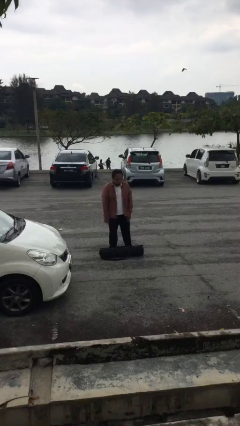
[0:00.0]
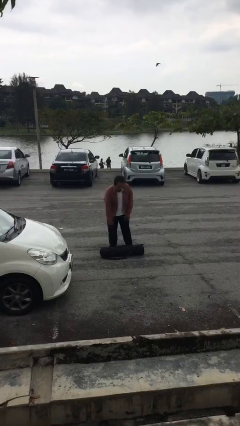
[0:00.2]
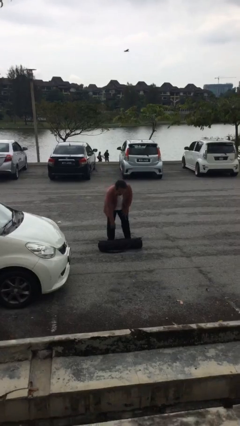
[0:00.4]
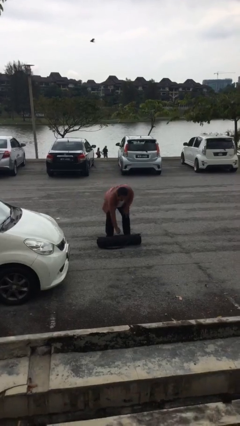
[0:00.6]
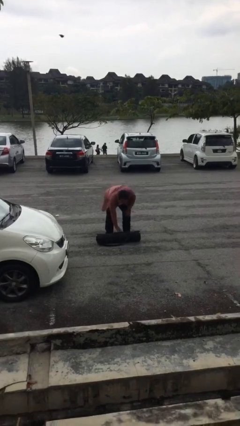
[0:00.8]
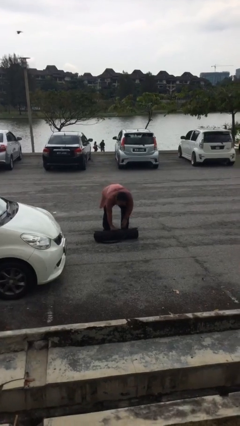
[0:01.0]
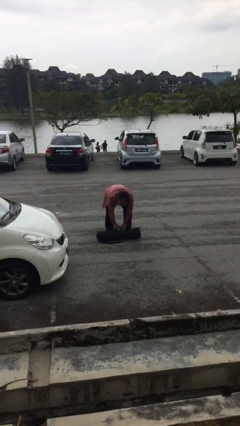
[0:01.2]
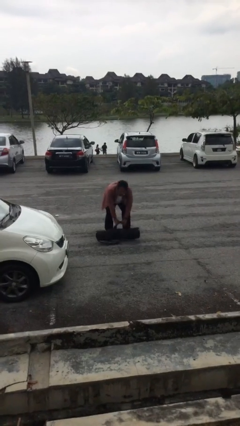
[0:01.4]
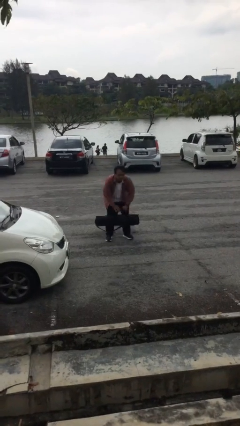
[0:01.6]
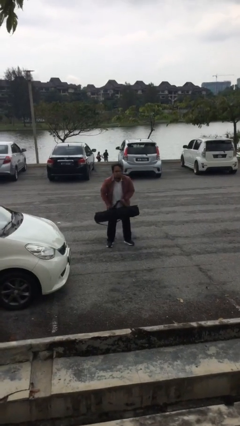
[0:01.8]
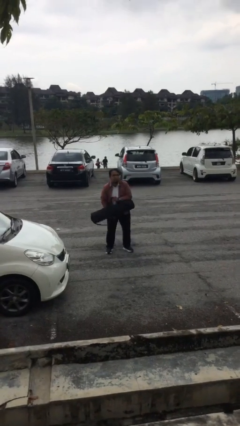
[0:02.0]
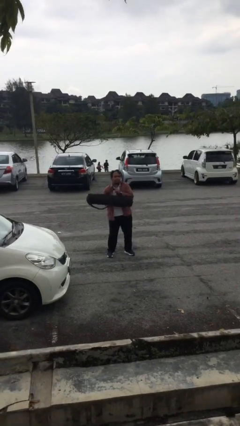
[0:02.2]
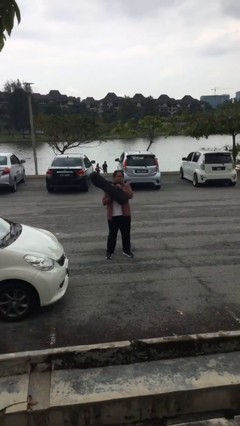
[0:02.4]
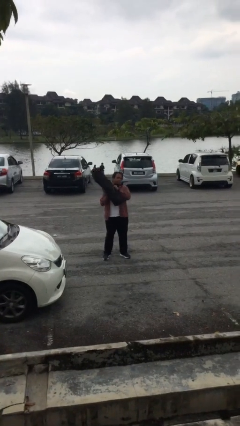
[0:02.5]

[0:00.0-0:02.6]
person picks up object from floor

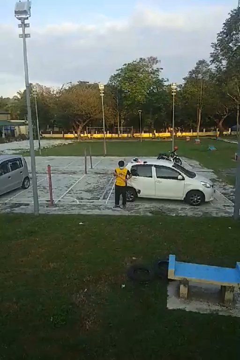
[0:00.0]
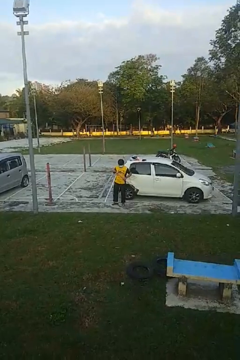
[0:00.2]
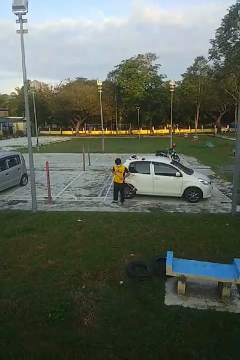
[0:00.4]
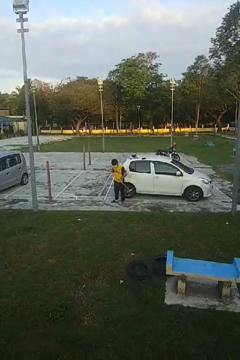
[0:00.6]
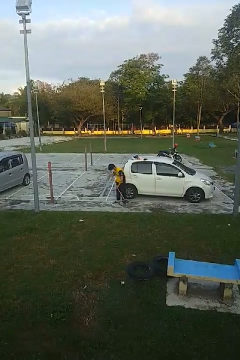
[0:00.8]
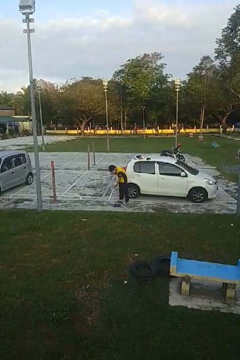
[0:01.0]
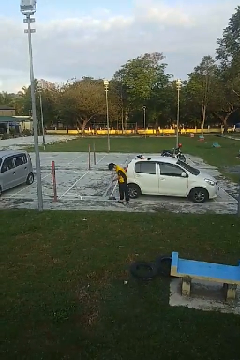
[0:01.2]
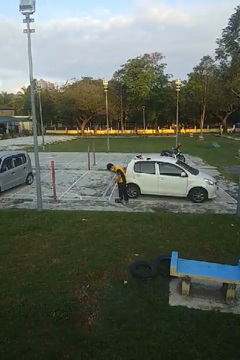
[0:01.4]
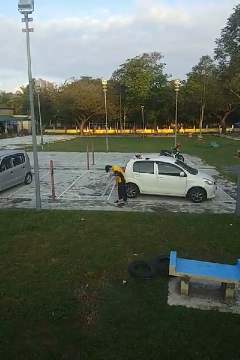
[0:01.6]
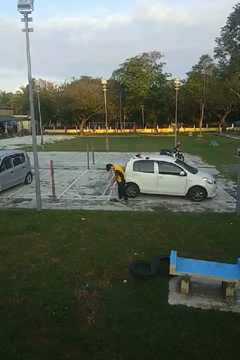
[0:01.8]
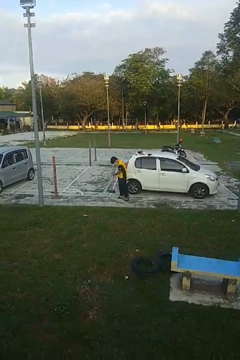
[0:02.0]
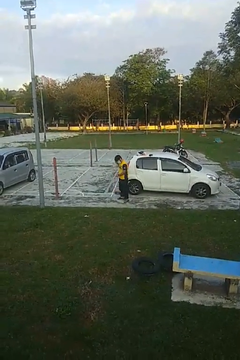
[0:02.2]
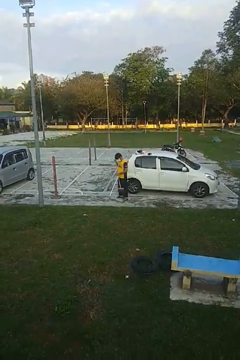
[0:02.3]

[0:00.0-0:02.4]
person sweeps floor

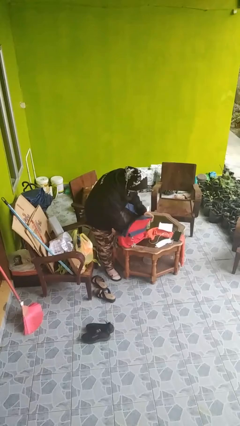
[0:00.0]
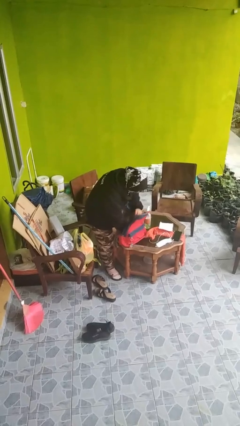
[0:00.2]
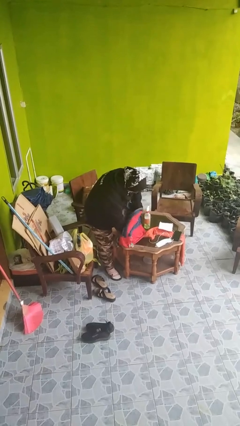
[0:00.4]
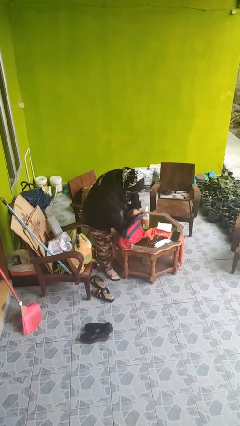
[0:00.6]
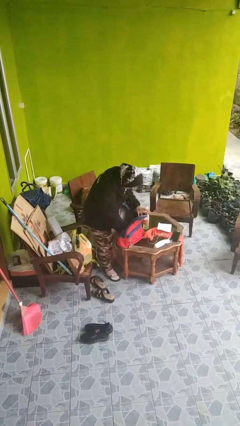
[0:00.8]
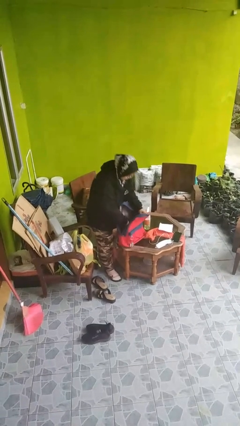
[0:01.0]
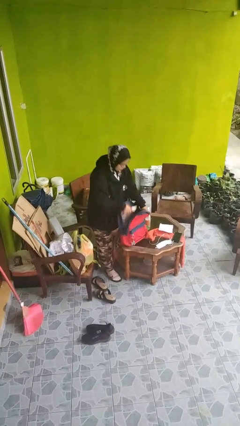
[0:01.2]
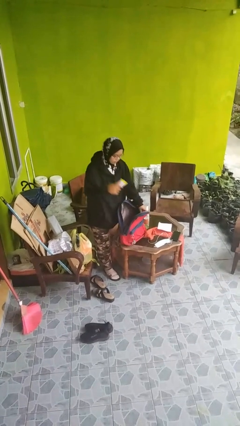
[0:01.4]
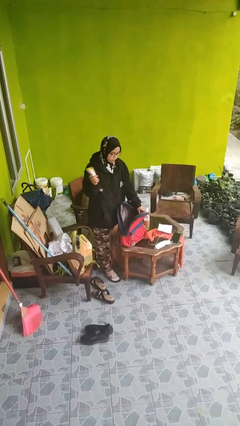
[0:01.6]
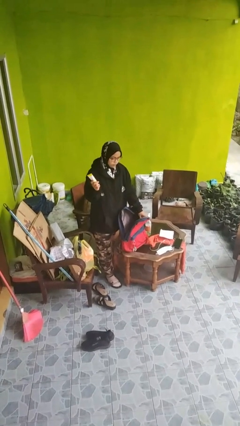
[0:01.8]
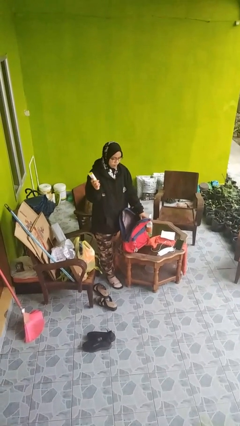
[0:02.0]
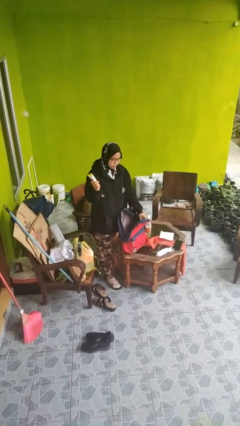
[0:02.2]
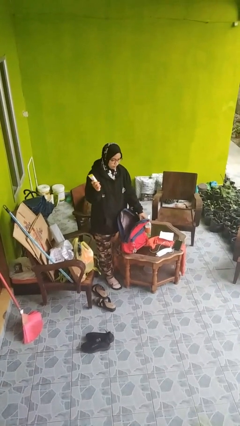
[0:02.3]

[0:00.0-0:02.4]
person takes object from backpack

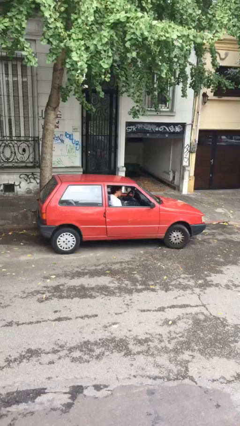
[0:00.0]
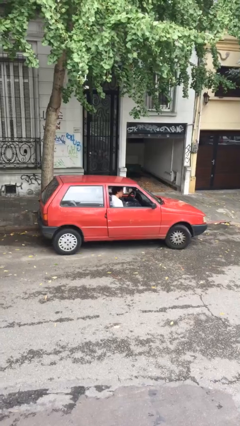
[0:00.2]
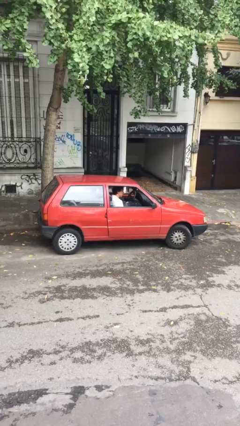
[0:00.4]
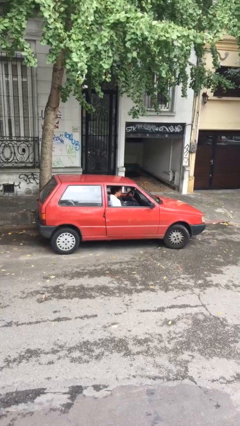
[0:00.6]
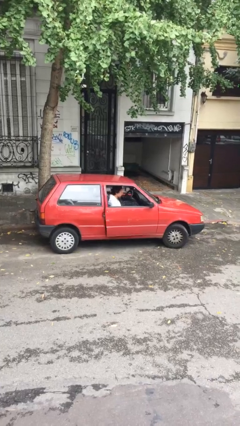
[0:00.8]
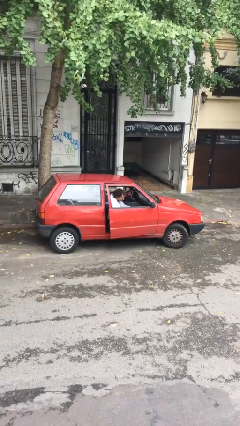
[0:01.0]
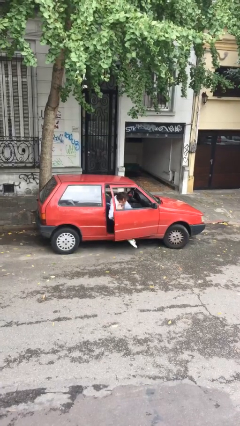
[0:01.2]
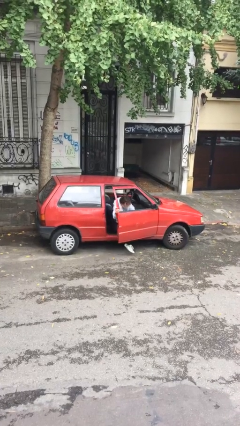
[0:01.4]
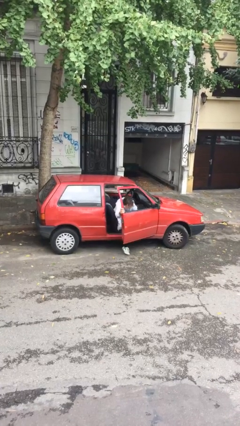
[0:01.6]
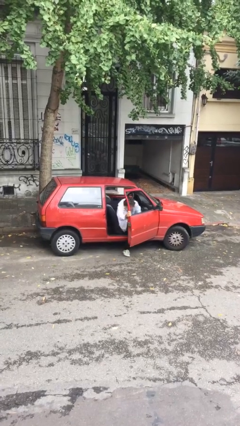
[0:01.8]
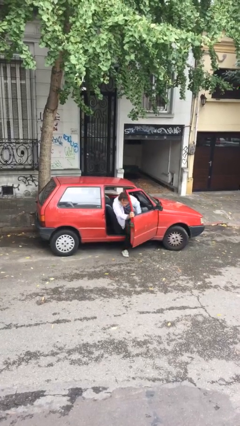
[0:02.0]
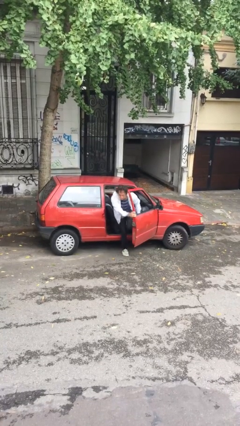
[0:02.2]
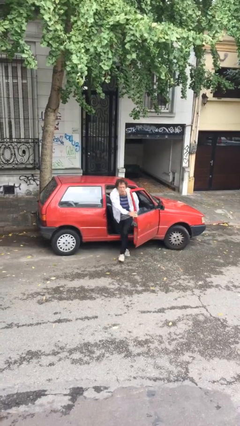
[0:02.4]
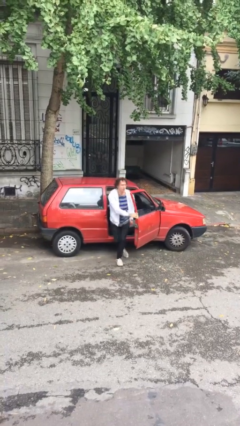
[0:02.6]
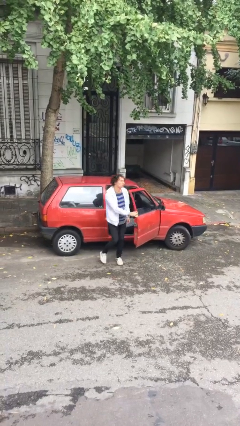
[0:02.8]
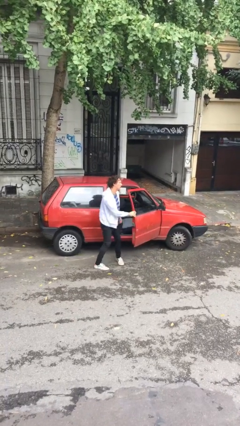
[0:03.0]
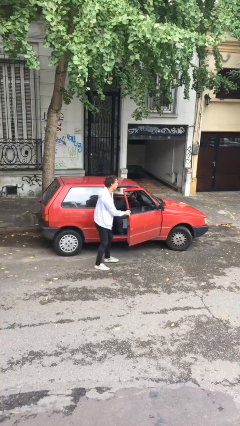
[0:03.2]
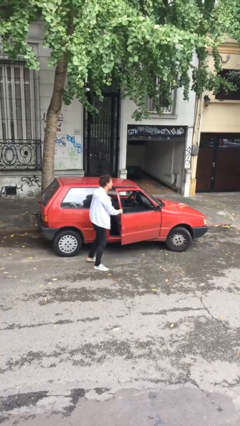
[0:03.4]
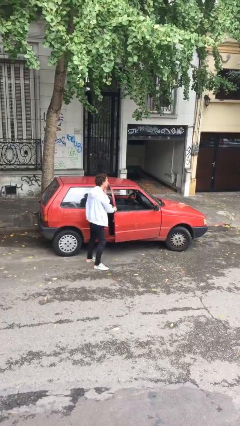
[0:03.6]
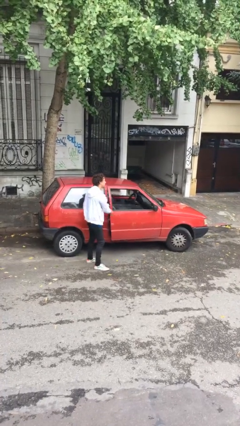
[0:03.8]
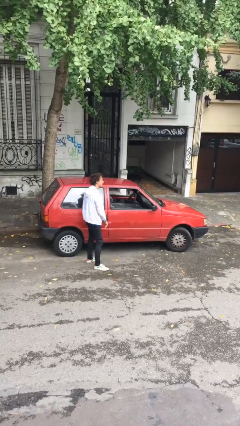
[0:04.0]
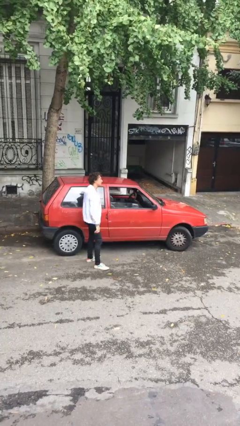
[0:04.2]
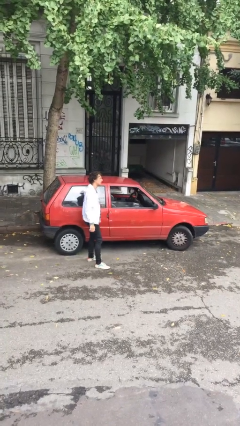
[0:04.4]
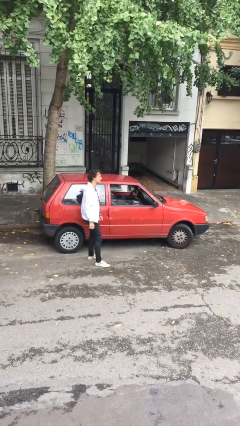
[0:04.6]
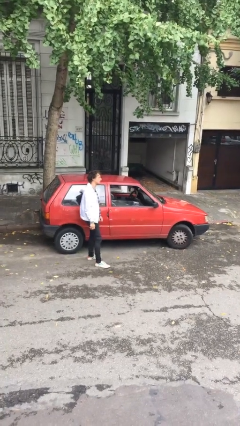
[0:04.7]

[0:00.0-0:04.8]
car drops off person

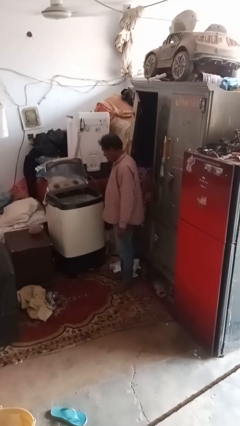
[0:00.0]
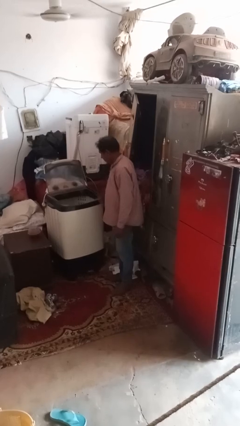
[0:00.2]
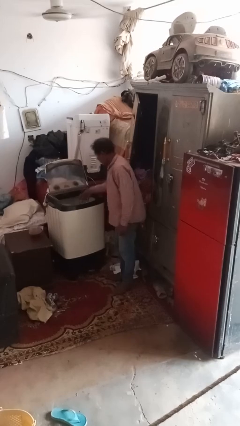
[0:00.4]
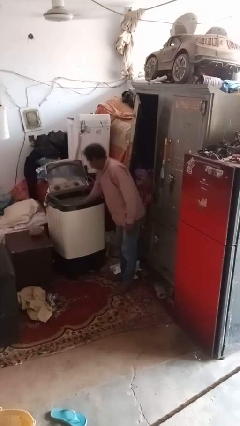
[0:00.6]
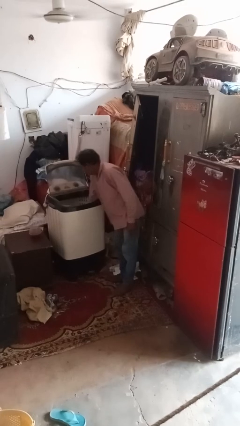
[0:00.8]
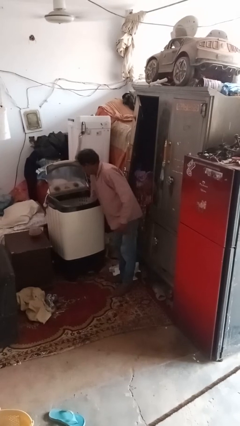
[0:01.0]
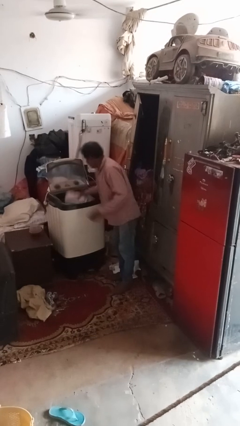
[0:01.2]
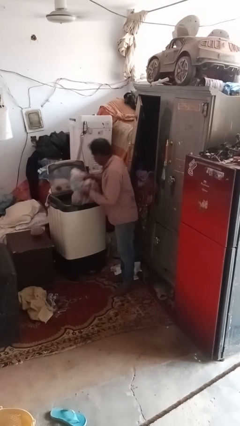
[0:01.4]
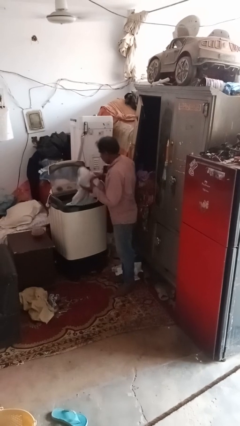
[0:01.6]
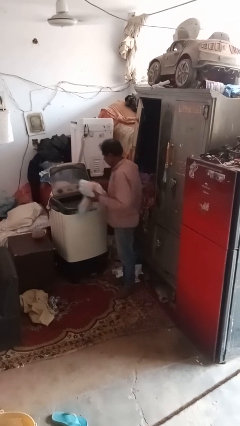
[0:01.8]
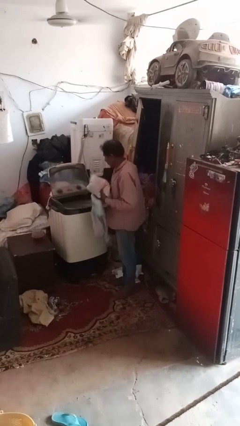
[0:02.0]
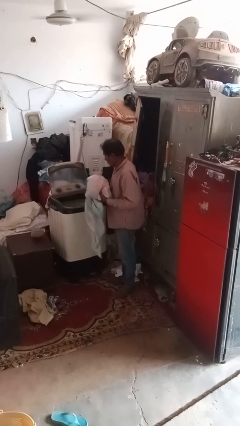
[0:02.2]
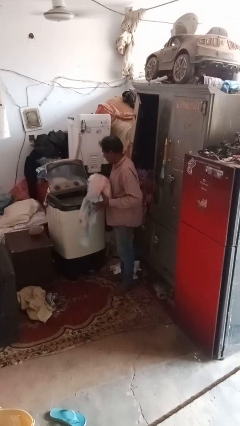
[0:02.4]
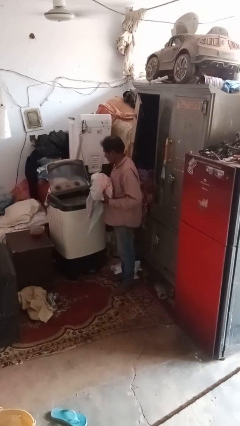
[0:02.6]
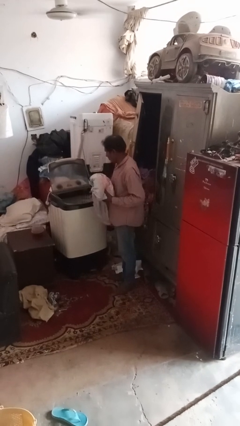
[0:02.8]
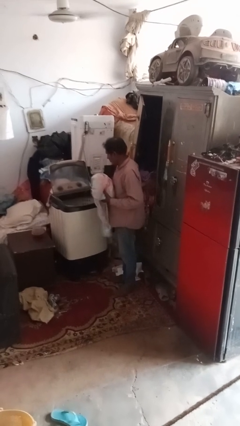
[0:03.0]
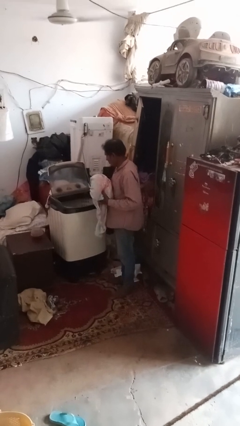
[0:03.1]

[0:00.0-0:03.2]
person unloads clotheswasher

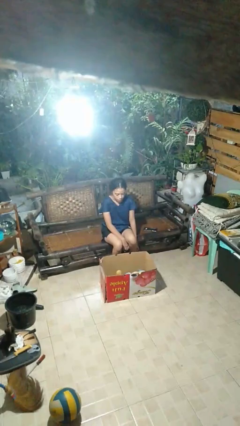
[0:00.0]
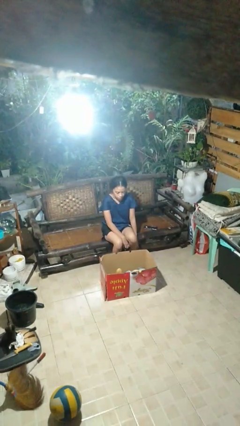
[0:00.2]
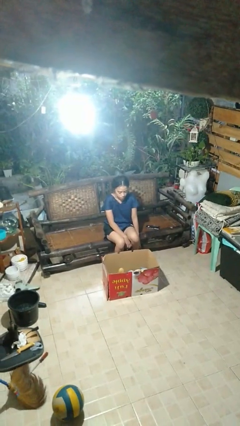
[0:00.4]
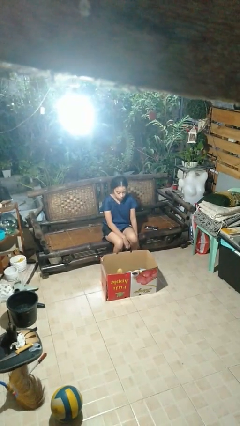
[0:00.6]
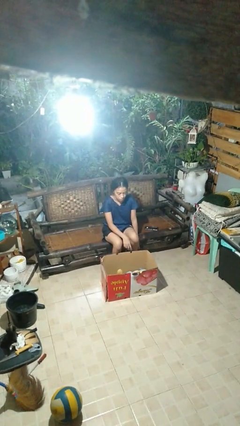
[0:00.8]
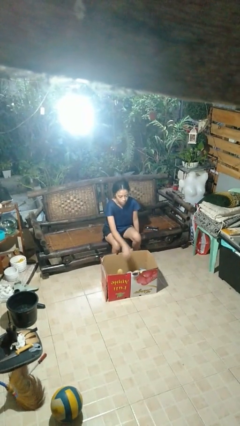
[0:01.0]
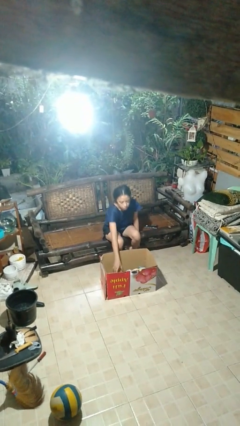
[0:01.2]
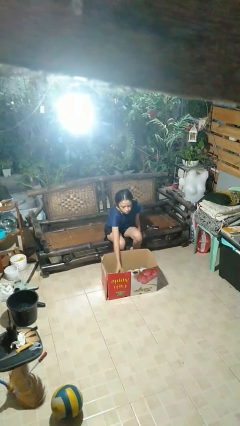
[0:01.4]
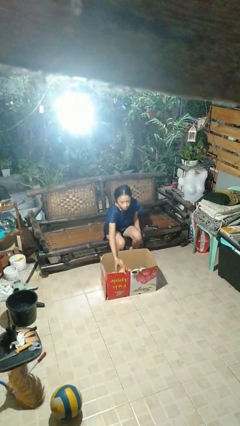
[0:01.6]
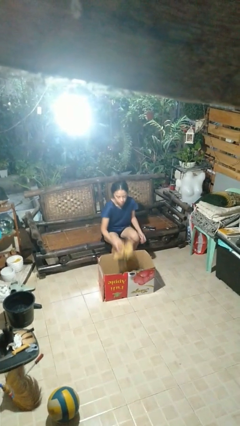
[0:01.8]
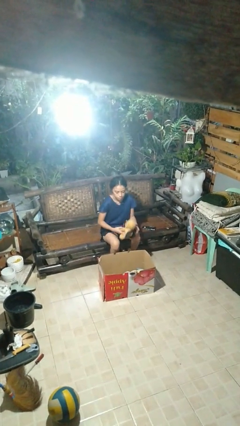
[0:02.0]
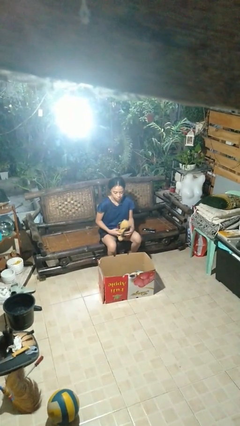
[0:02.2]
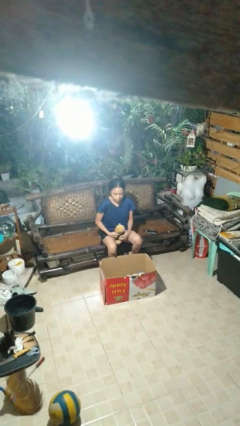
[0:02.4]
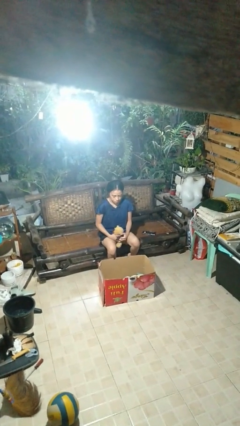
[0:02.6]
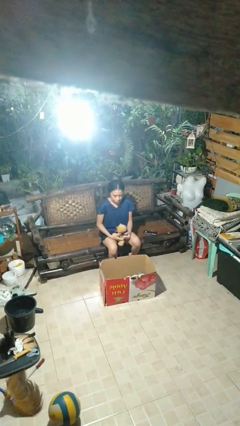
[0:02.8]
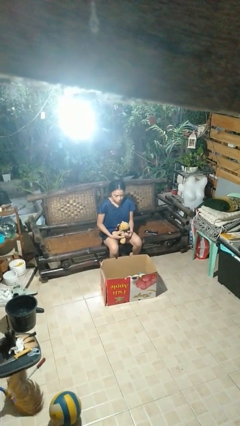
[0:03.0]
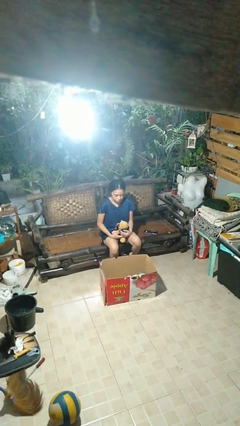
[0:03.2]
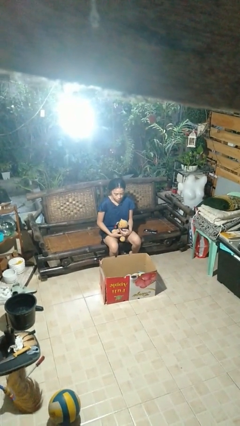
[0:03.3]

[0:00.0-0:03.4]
person takes object from box
